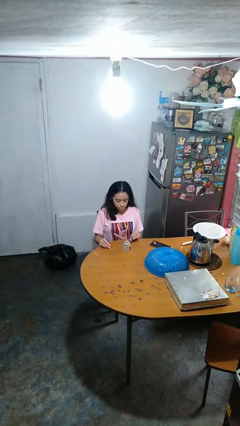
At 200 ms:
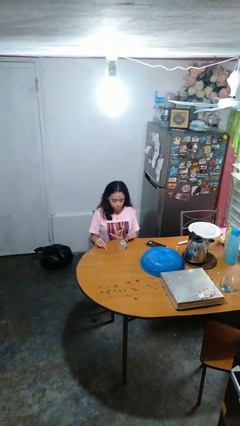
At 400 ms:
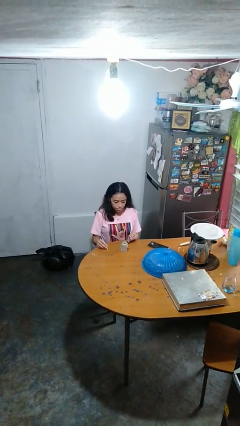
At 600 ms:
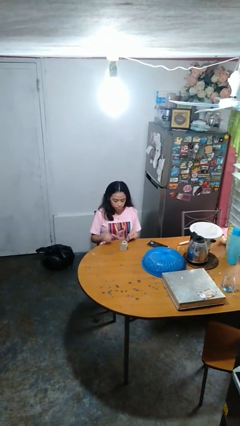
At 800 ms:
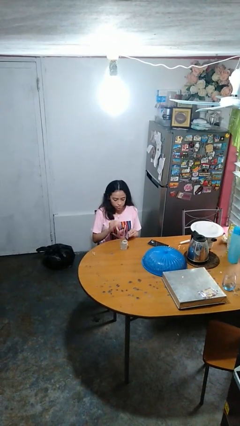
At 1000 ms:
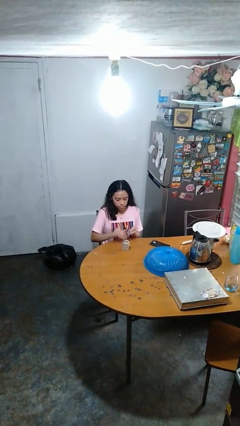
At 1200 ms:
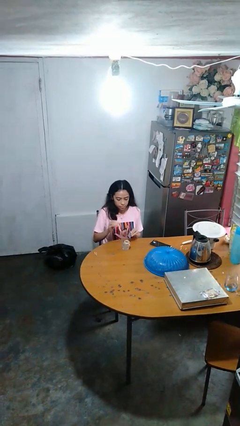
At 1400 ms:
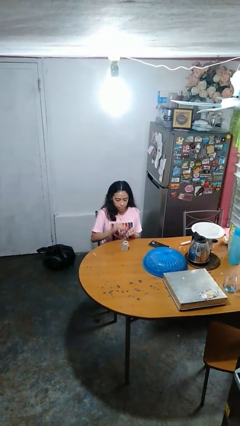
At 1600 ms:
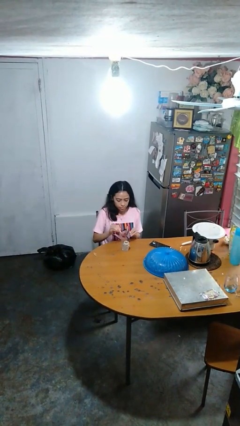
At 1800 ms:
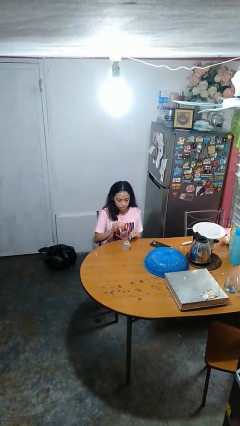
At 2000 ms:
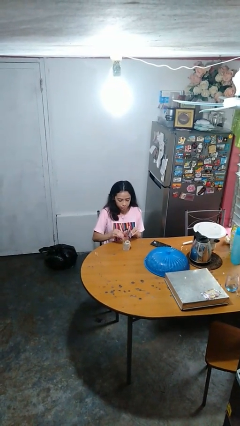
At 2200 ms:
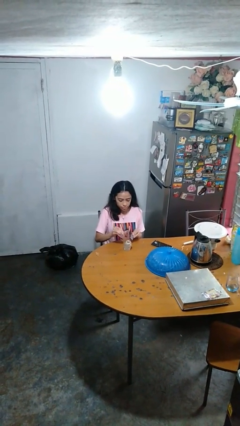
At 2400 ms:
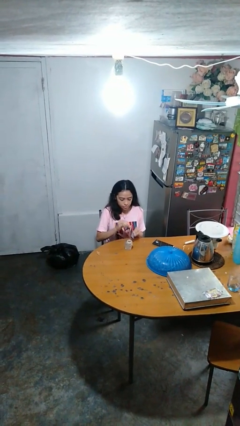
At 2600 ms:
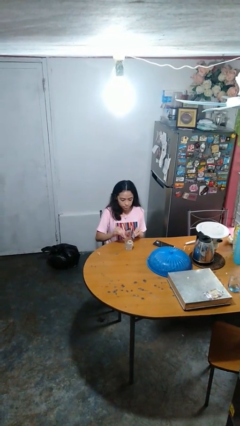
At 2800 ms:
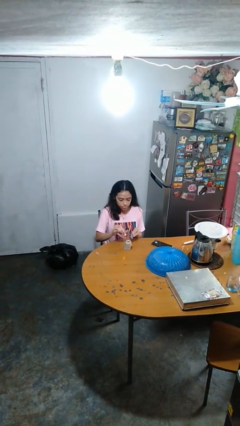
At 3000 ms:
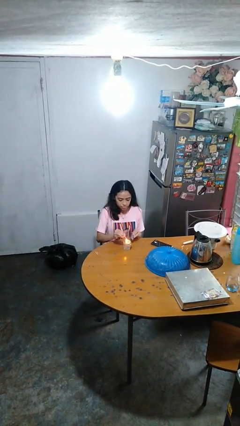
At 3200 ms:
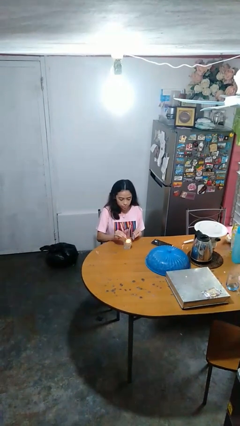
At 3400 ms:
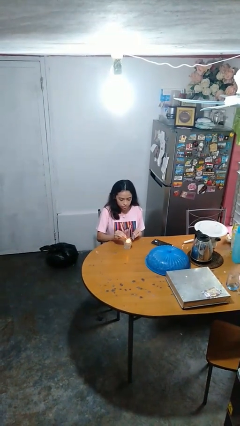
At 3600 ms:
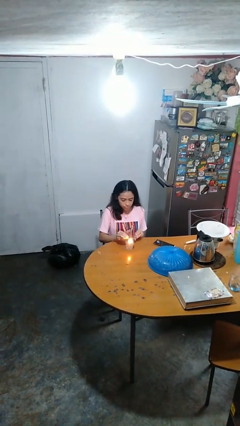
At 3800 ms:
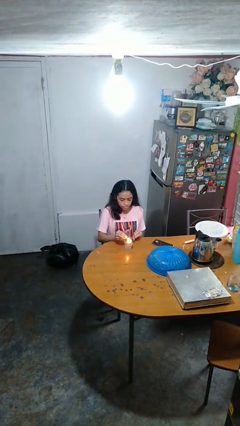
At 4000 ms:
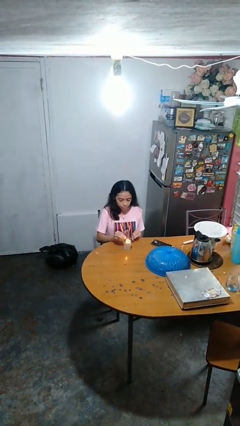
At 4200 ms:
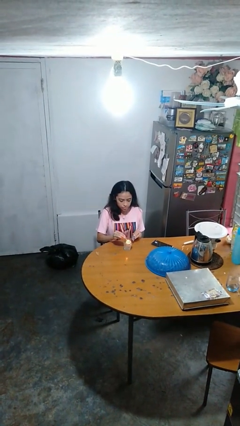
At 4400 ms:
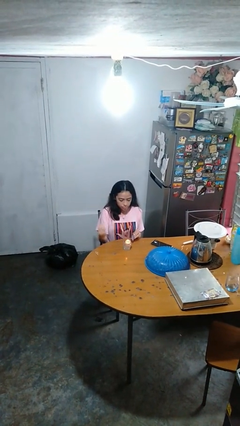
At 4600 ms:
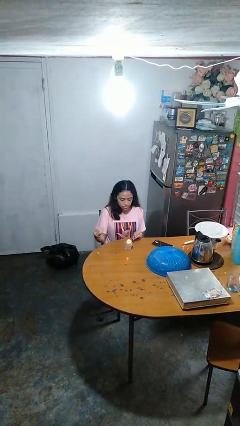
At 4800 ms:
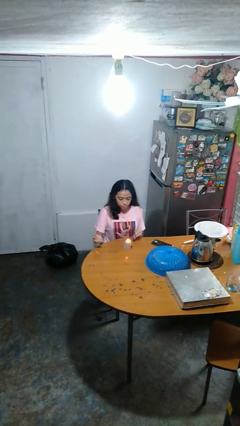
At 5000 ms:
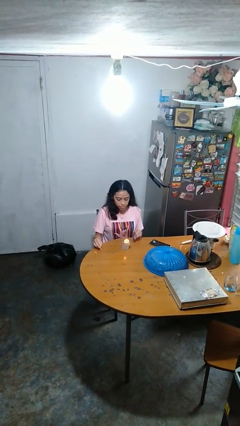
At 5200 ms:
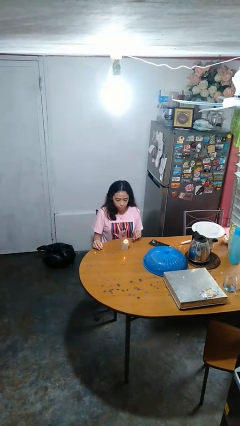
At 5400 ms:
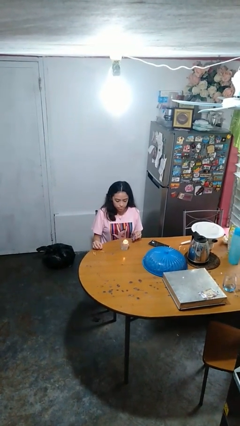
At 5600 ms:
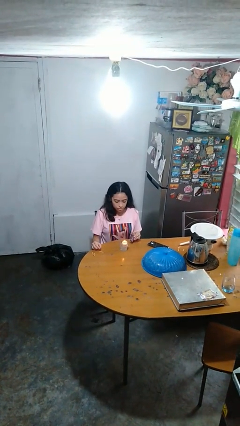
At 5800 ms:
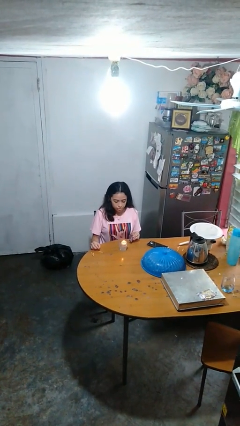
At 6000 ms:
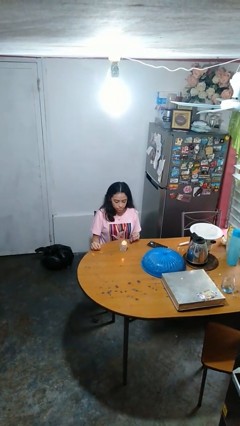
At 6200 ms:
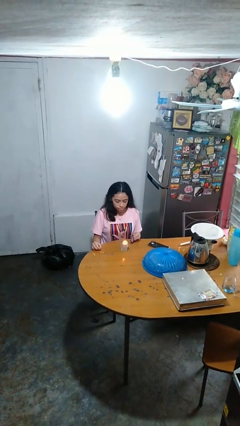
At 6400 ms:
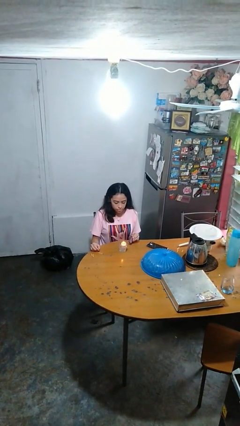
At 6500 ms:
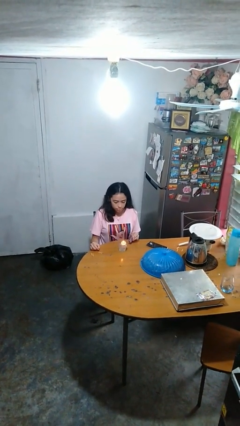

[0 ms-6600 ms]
person lights candle

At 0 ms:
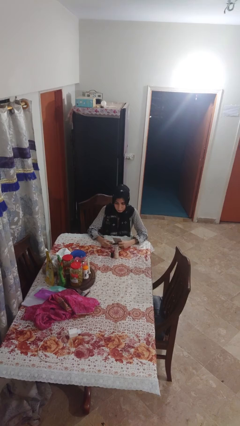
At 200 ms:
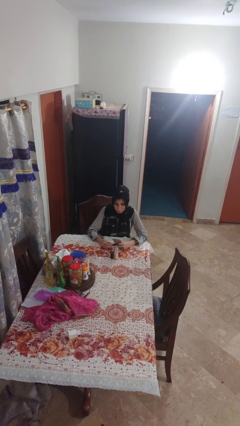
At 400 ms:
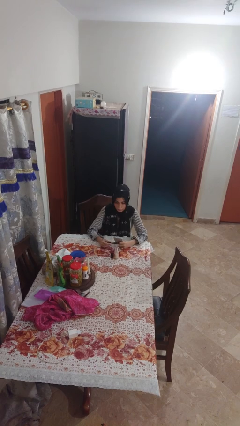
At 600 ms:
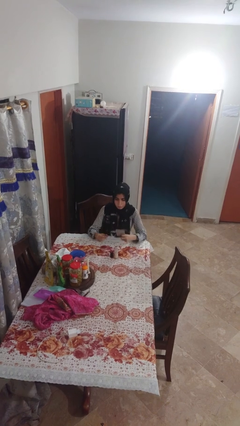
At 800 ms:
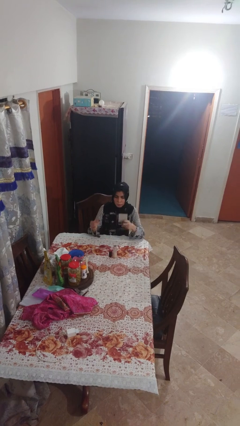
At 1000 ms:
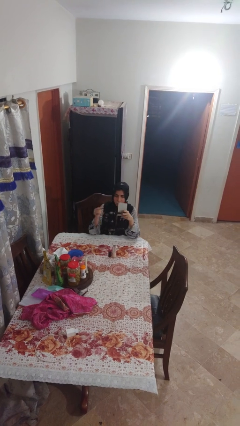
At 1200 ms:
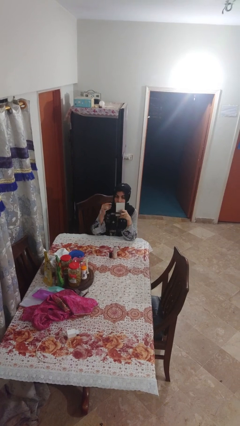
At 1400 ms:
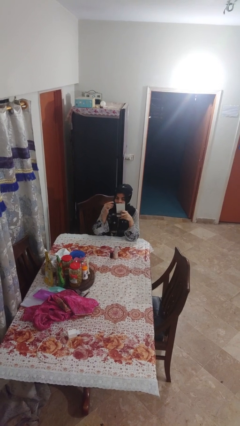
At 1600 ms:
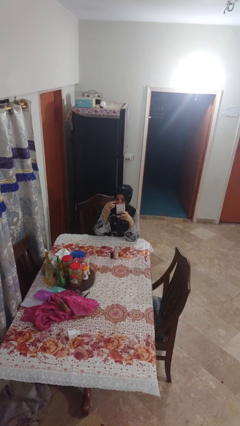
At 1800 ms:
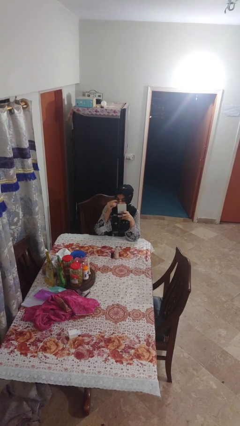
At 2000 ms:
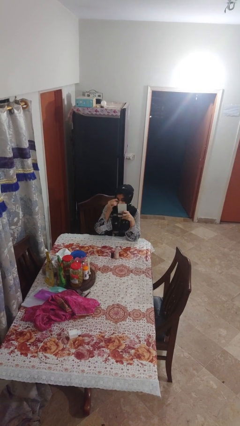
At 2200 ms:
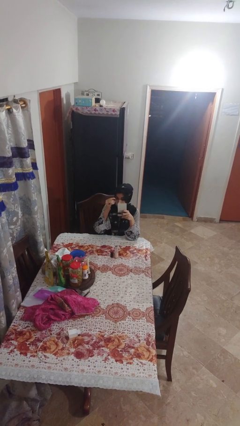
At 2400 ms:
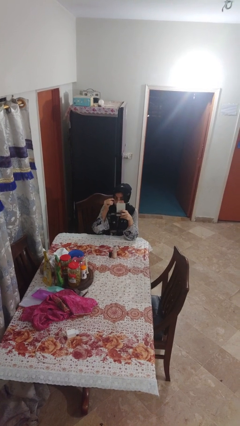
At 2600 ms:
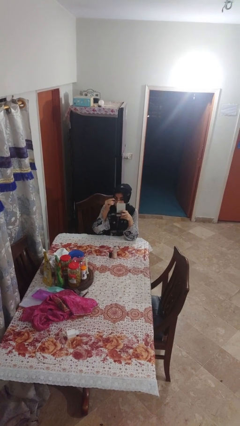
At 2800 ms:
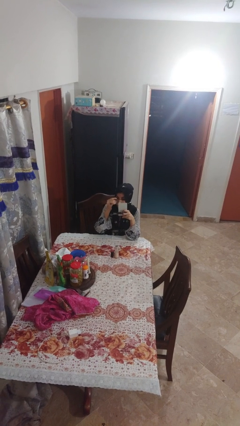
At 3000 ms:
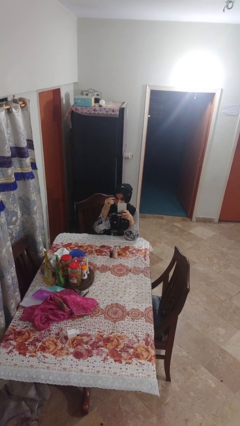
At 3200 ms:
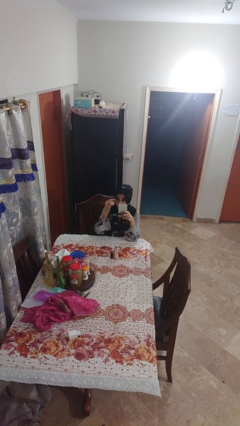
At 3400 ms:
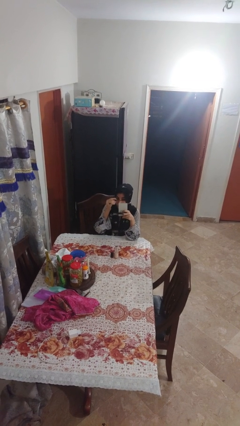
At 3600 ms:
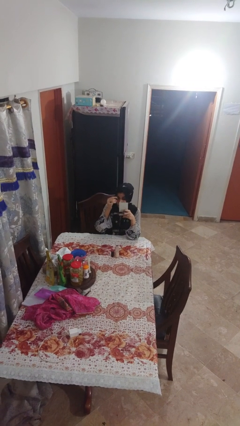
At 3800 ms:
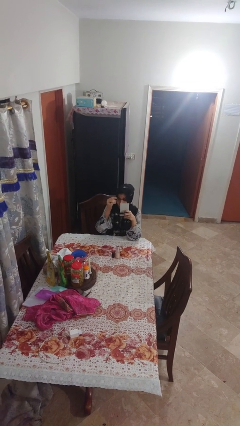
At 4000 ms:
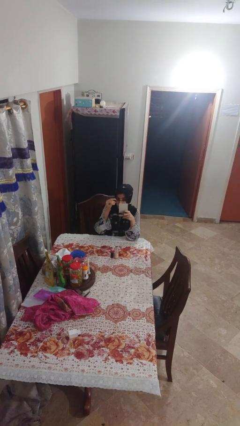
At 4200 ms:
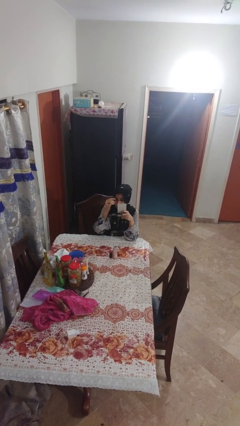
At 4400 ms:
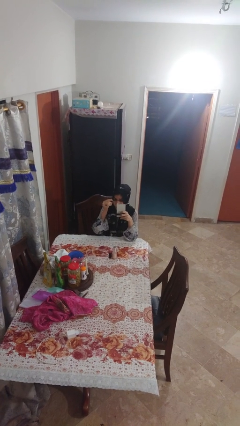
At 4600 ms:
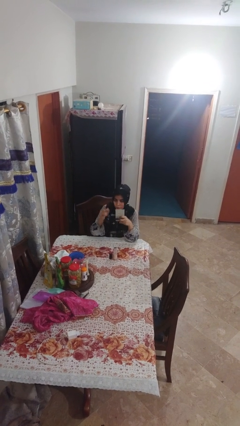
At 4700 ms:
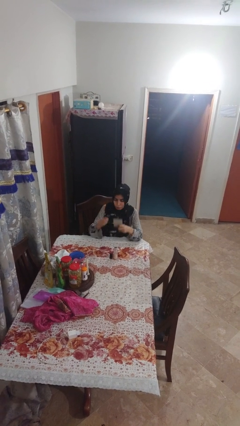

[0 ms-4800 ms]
person applies eye makeup

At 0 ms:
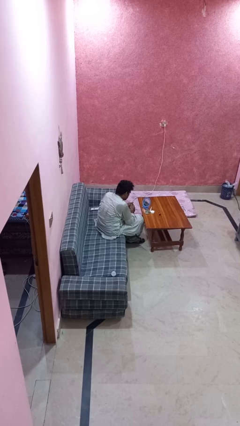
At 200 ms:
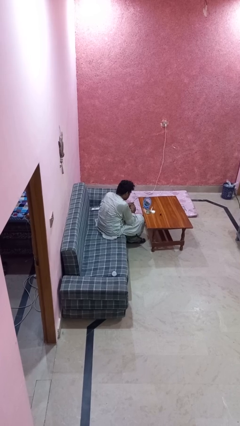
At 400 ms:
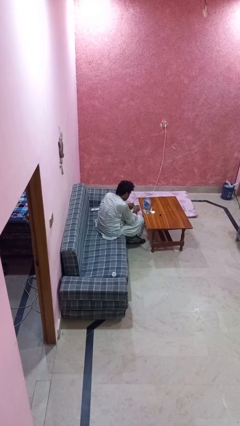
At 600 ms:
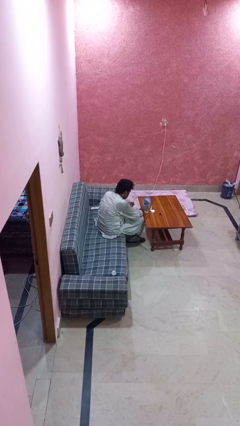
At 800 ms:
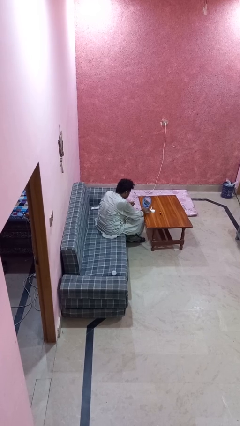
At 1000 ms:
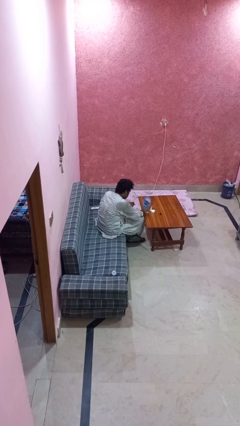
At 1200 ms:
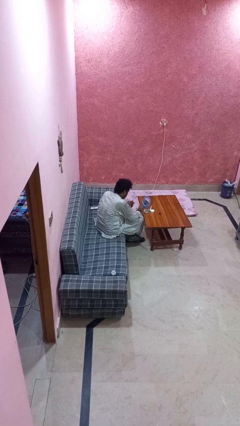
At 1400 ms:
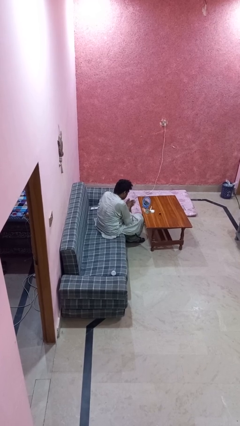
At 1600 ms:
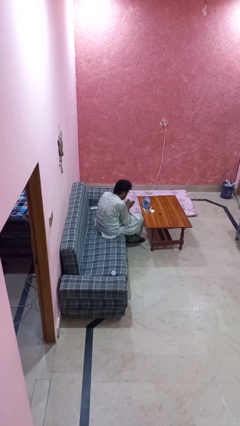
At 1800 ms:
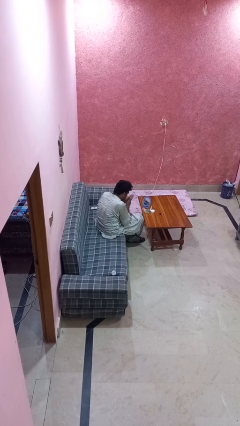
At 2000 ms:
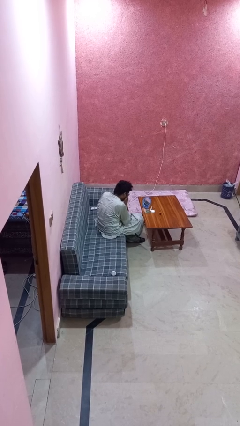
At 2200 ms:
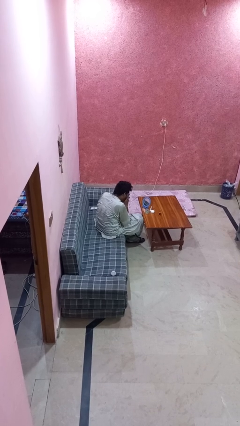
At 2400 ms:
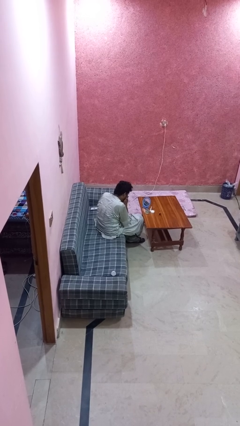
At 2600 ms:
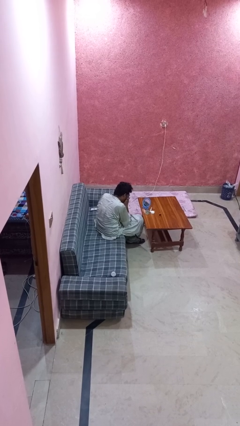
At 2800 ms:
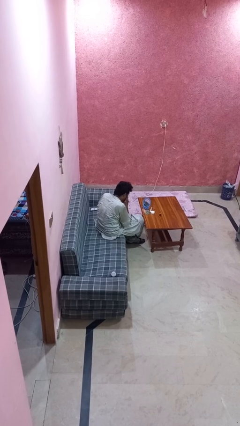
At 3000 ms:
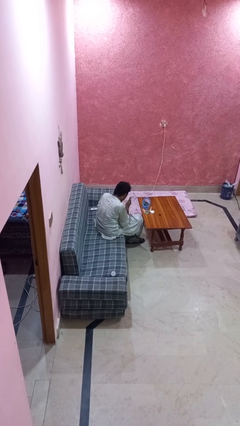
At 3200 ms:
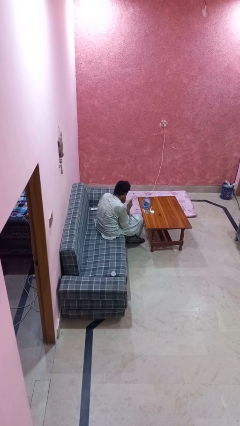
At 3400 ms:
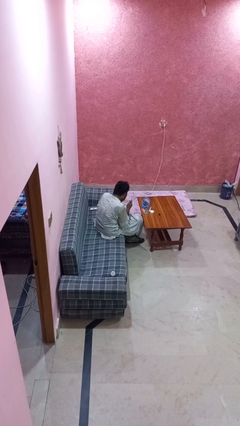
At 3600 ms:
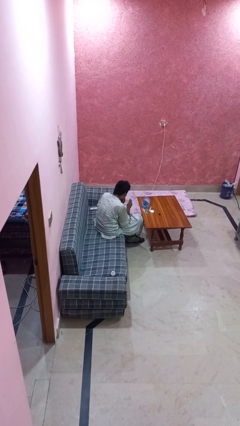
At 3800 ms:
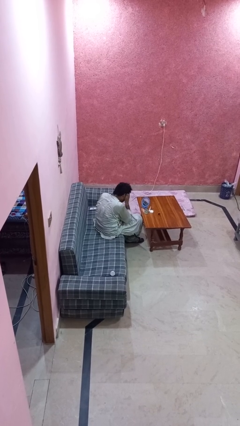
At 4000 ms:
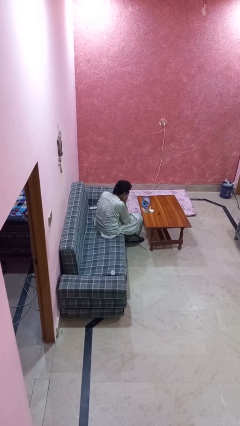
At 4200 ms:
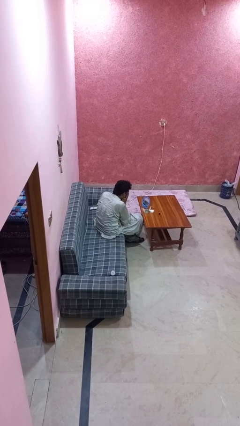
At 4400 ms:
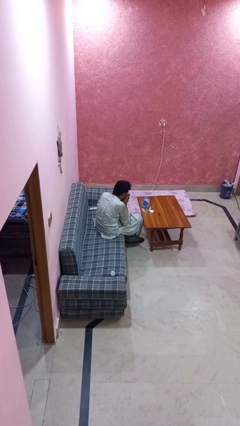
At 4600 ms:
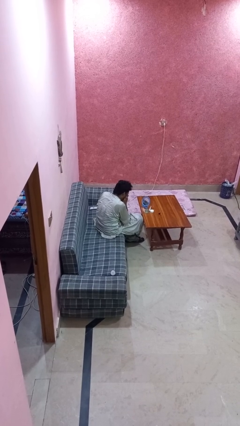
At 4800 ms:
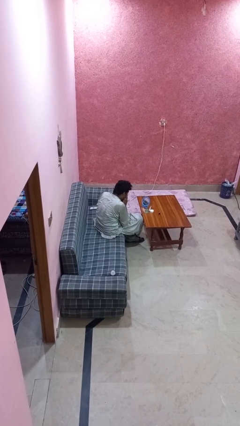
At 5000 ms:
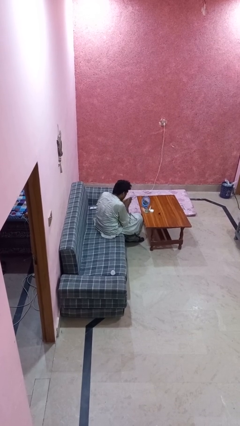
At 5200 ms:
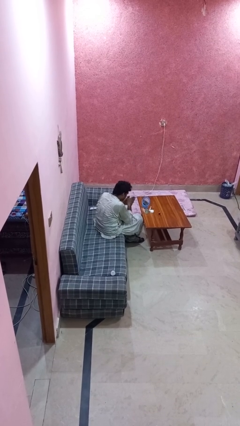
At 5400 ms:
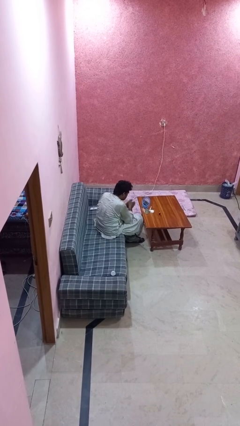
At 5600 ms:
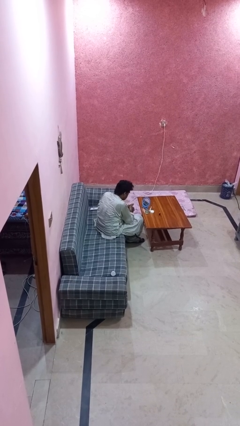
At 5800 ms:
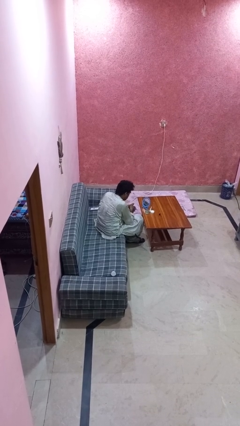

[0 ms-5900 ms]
person applies foundation makeup

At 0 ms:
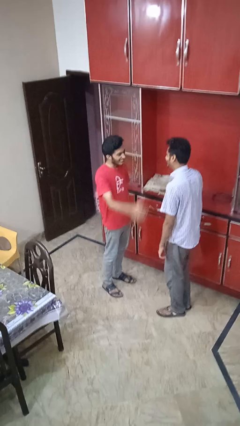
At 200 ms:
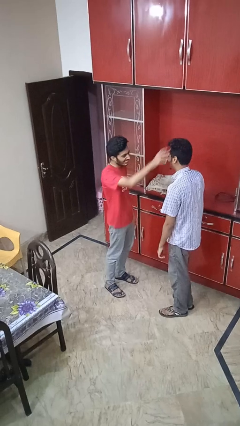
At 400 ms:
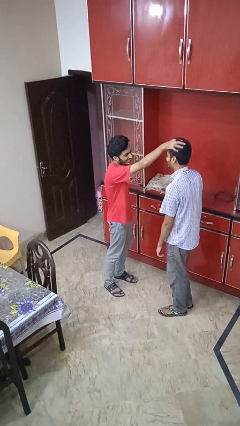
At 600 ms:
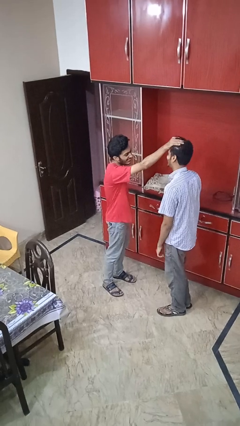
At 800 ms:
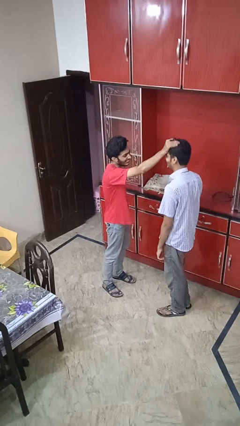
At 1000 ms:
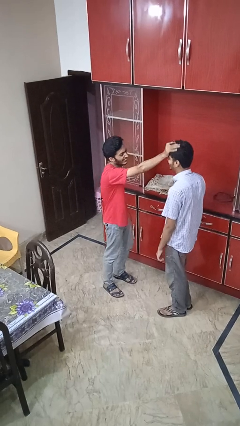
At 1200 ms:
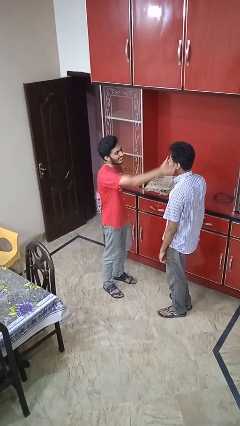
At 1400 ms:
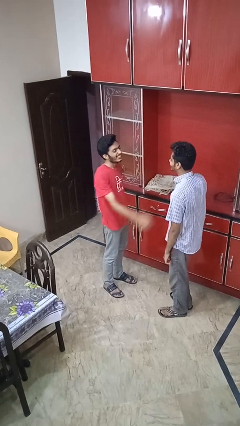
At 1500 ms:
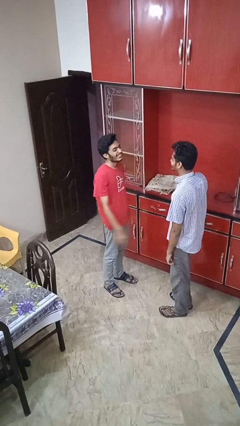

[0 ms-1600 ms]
person grabs person by hair
